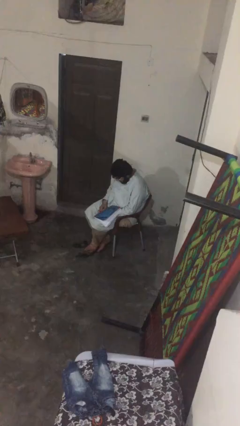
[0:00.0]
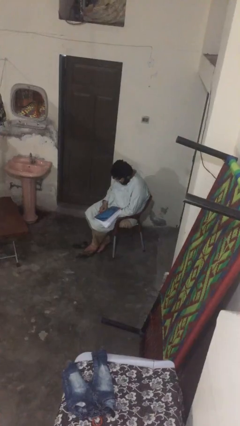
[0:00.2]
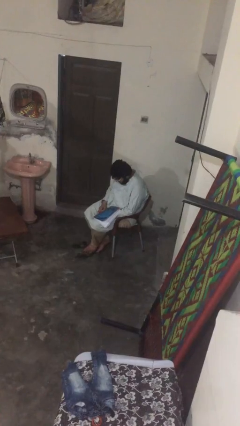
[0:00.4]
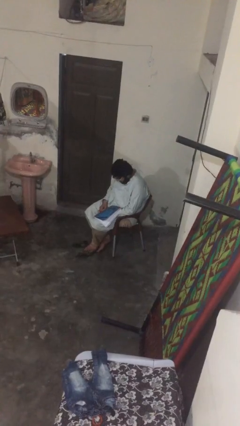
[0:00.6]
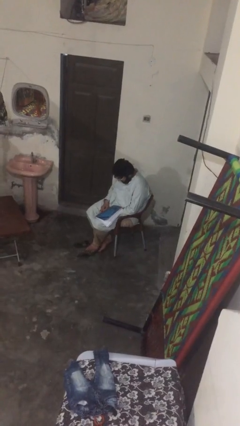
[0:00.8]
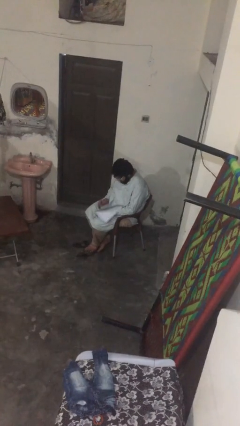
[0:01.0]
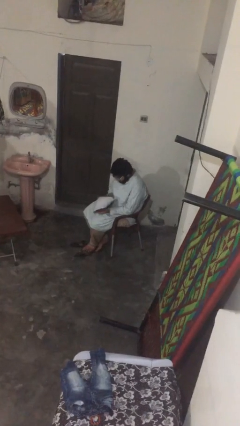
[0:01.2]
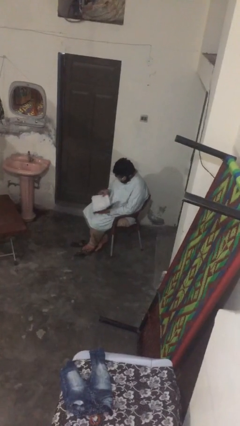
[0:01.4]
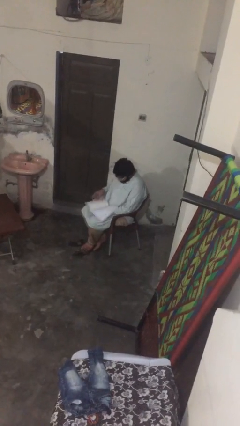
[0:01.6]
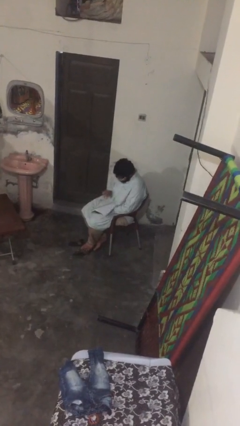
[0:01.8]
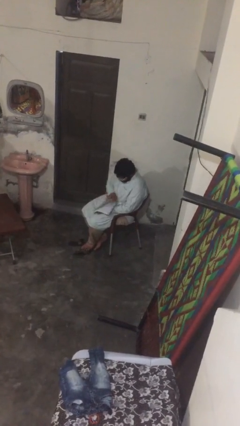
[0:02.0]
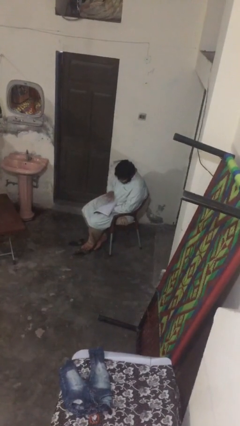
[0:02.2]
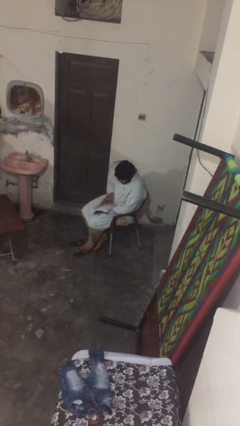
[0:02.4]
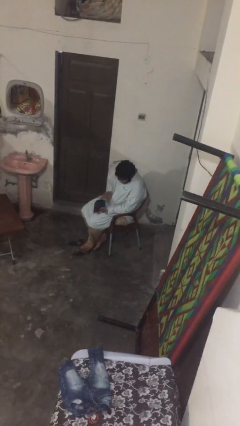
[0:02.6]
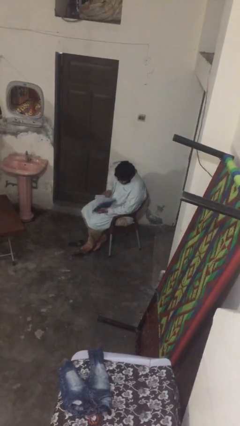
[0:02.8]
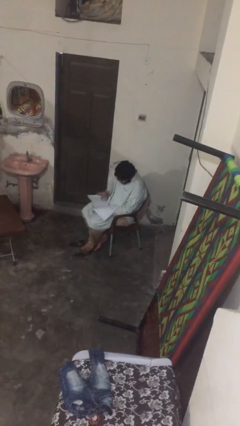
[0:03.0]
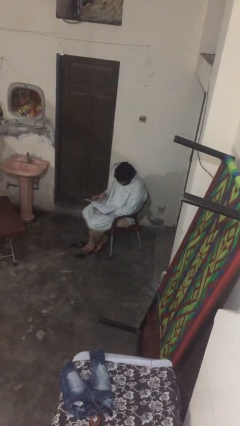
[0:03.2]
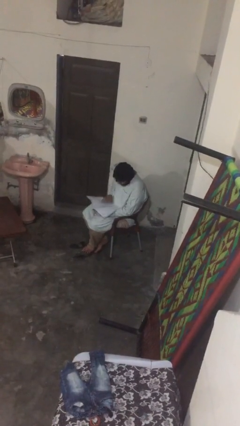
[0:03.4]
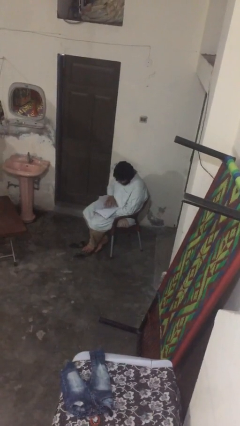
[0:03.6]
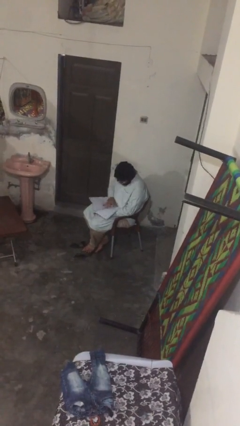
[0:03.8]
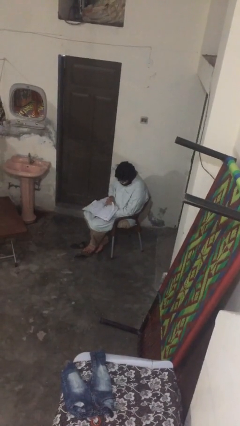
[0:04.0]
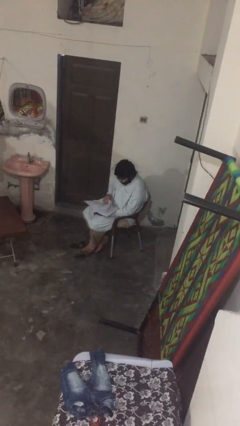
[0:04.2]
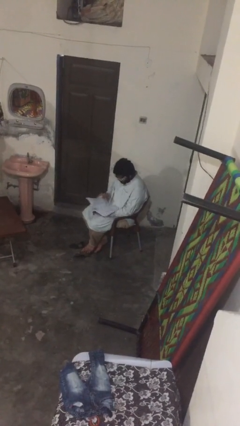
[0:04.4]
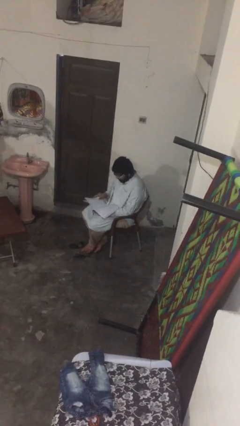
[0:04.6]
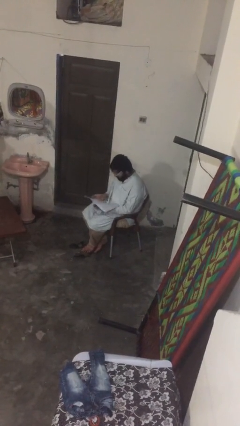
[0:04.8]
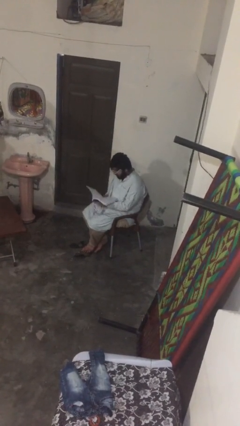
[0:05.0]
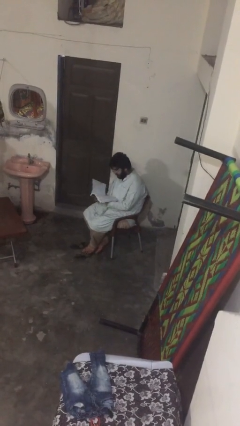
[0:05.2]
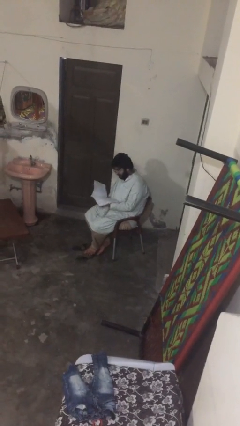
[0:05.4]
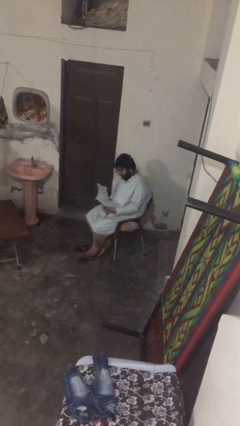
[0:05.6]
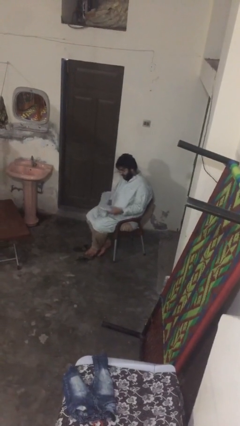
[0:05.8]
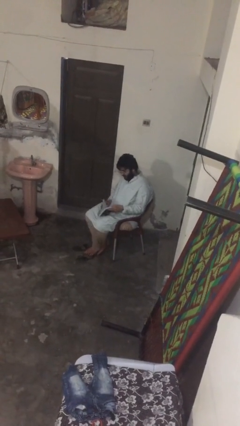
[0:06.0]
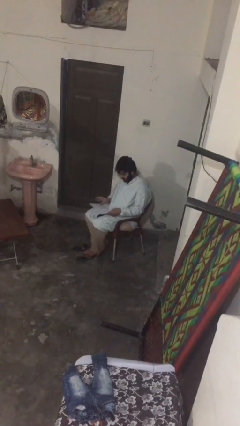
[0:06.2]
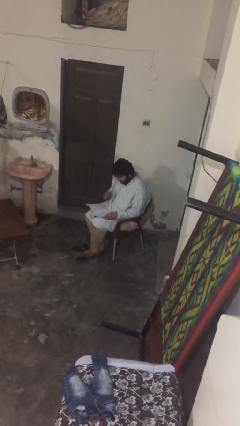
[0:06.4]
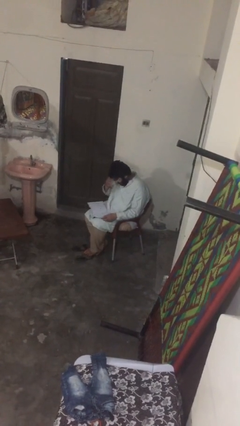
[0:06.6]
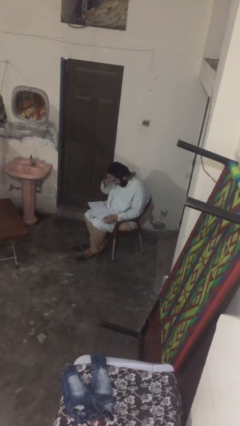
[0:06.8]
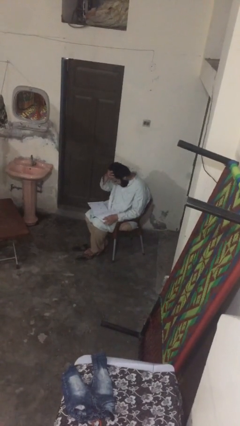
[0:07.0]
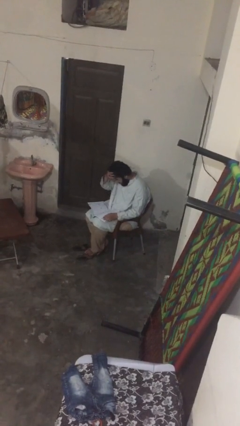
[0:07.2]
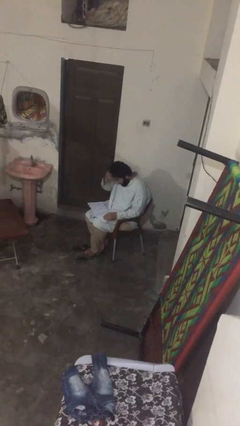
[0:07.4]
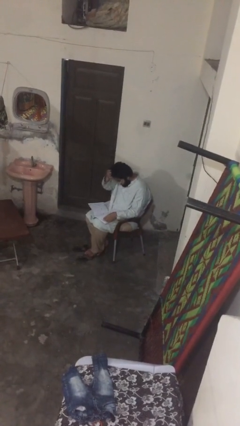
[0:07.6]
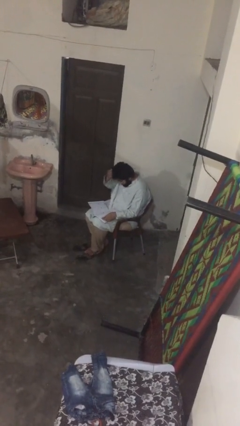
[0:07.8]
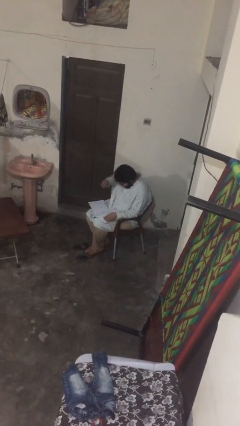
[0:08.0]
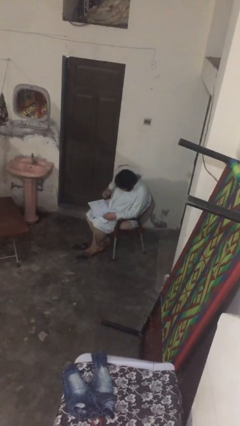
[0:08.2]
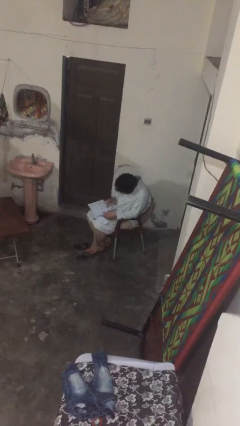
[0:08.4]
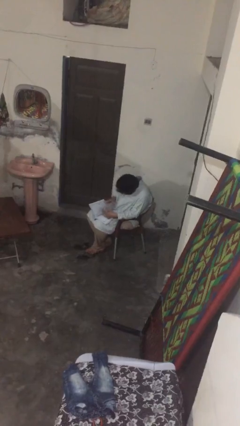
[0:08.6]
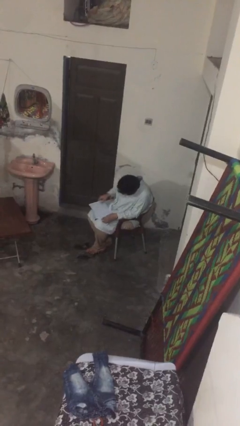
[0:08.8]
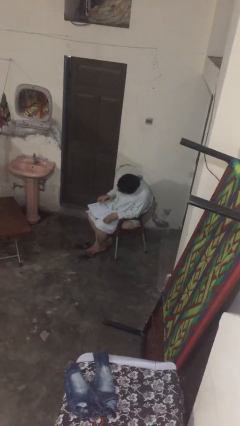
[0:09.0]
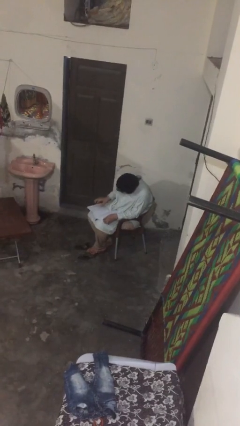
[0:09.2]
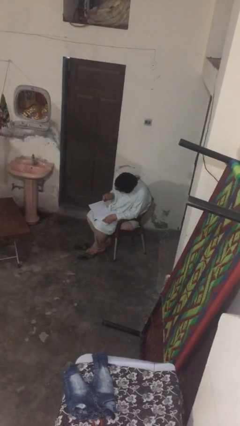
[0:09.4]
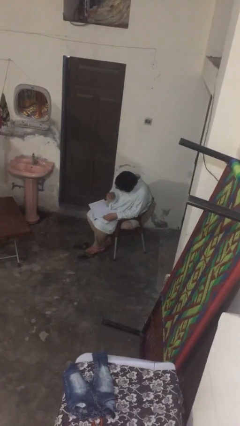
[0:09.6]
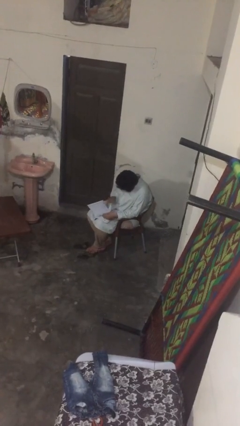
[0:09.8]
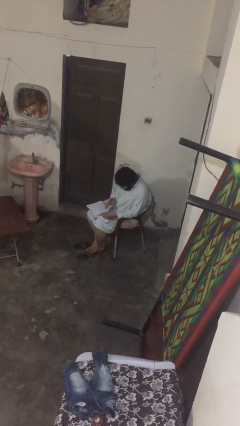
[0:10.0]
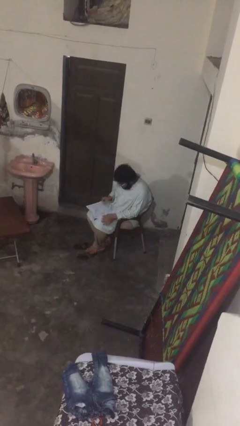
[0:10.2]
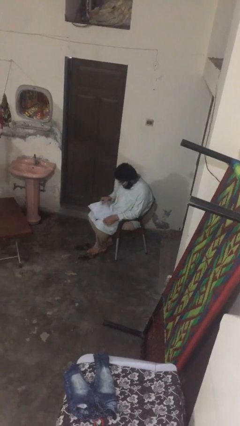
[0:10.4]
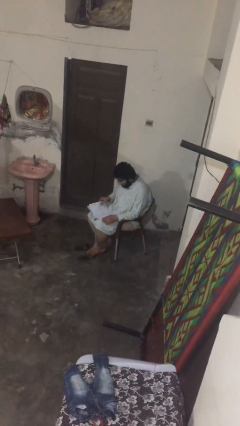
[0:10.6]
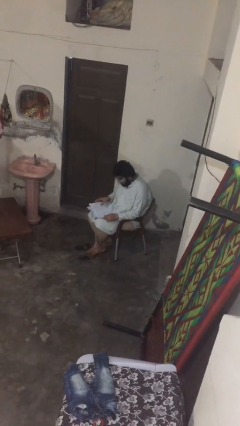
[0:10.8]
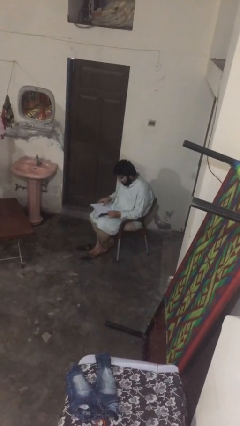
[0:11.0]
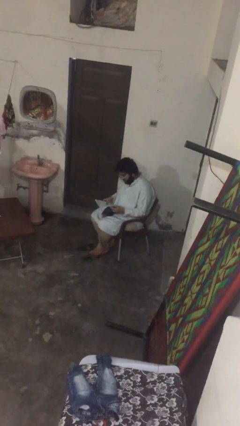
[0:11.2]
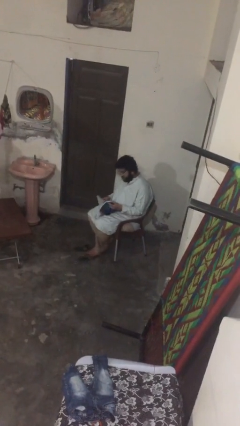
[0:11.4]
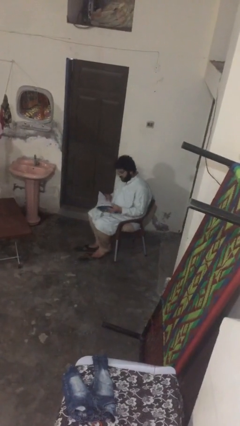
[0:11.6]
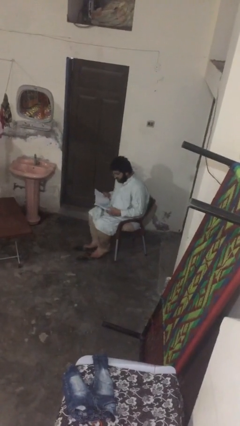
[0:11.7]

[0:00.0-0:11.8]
person reads document

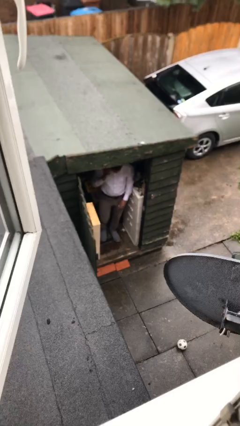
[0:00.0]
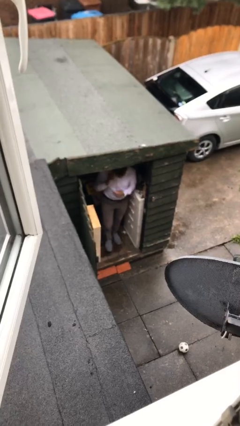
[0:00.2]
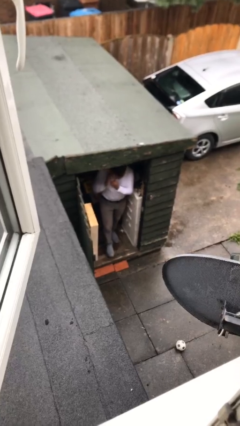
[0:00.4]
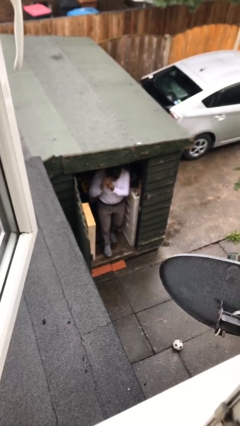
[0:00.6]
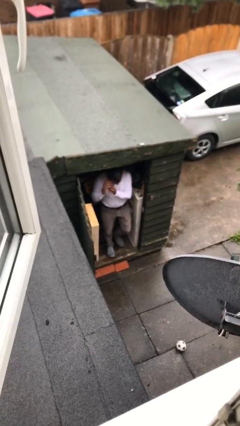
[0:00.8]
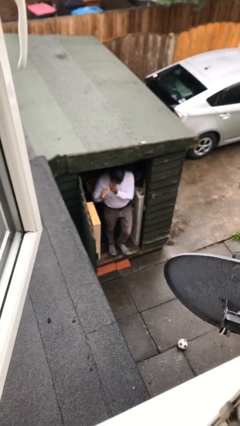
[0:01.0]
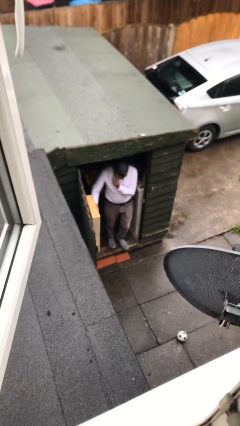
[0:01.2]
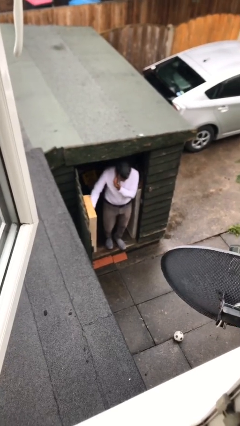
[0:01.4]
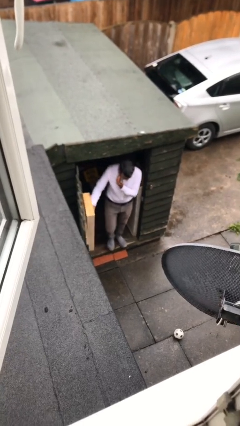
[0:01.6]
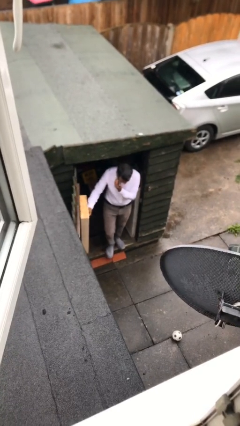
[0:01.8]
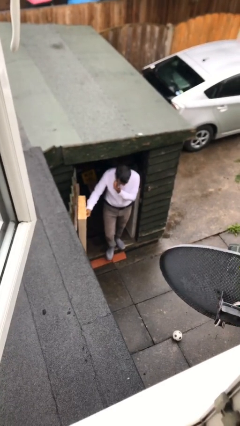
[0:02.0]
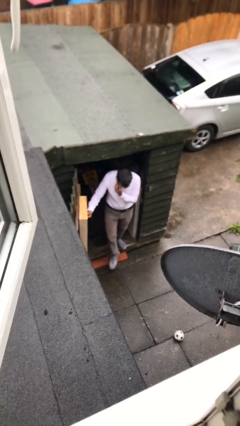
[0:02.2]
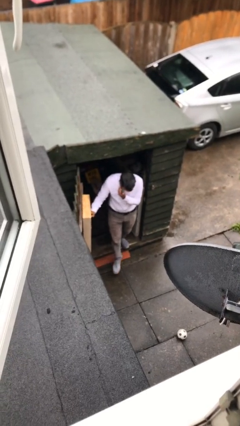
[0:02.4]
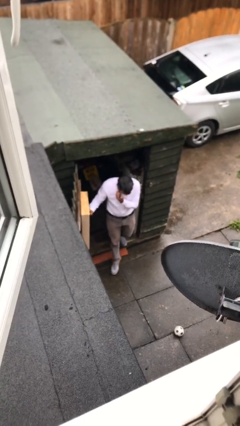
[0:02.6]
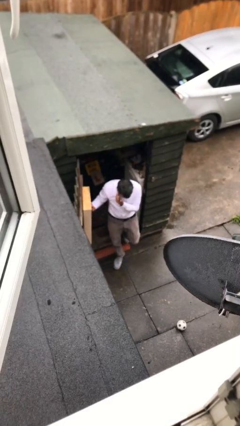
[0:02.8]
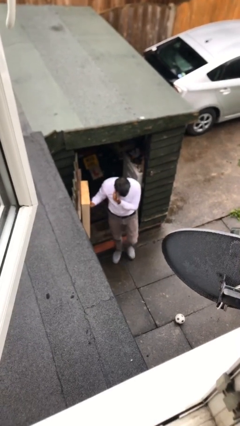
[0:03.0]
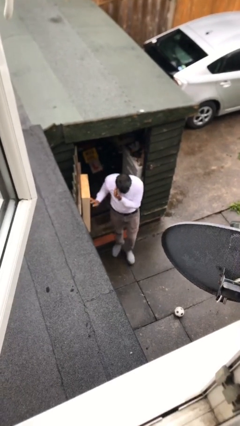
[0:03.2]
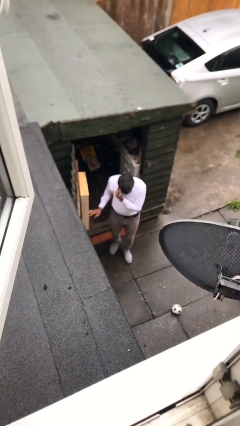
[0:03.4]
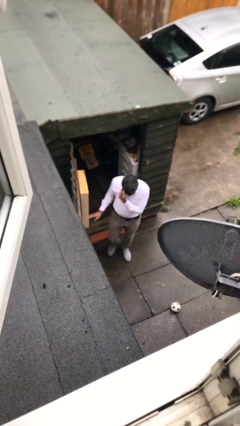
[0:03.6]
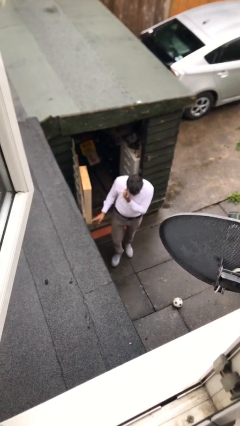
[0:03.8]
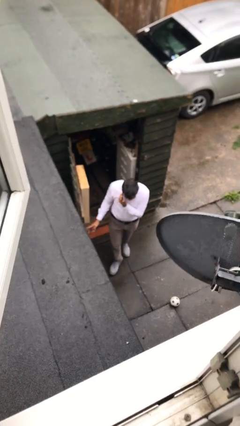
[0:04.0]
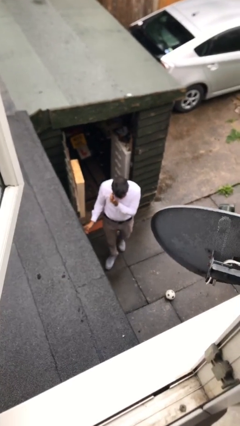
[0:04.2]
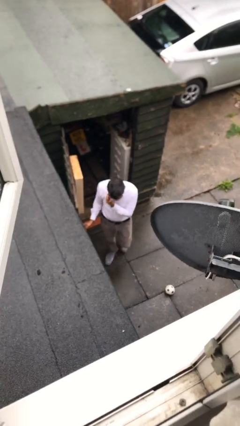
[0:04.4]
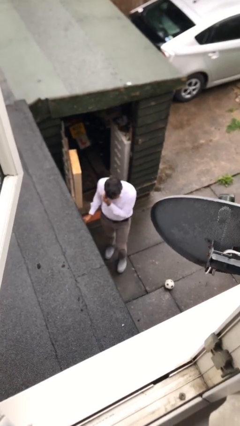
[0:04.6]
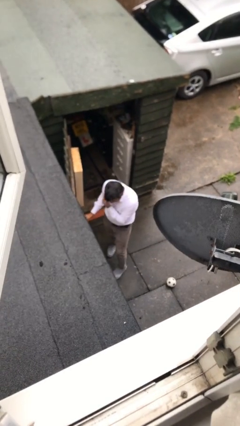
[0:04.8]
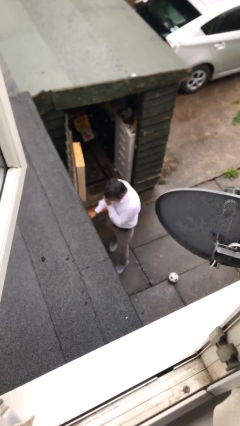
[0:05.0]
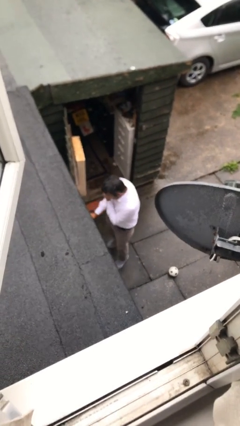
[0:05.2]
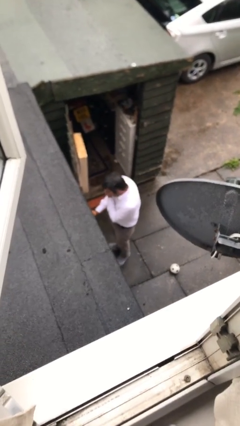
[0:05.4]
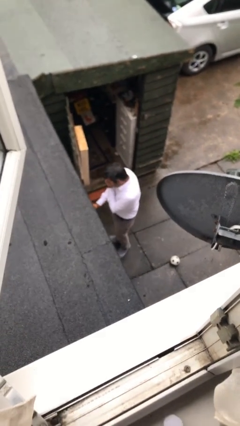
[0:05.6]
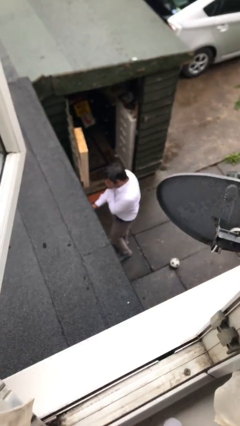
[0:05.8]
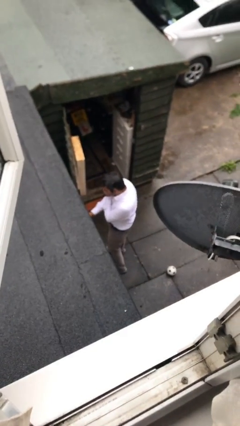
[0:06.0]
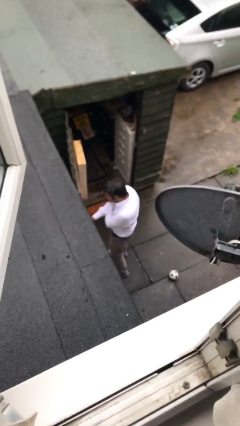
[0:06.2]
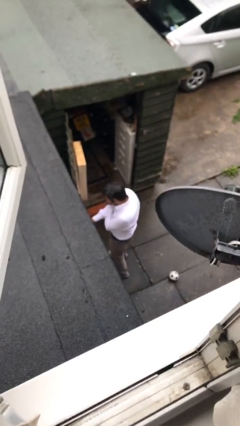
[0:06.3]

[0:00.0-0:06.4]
person enters scene through structure
